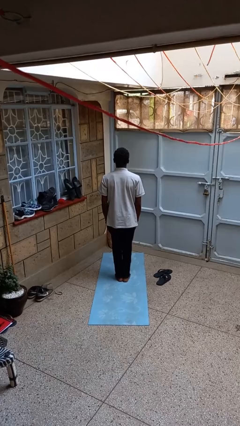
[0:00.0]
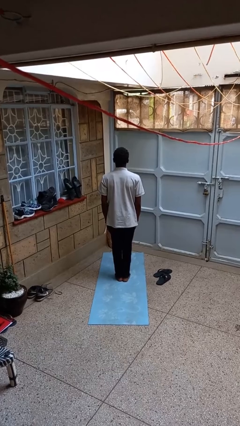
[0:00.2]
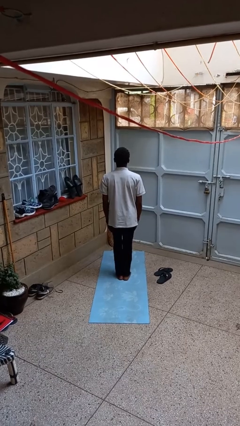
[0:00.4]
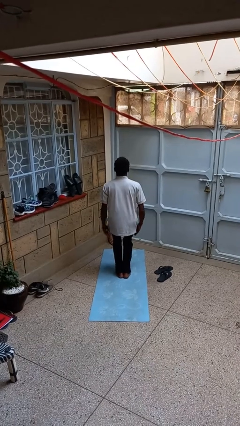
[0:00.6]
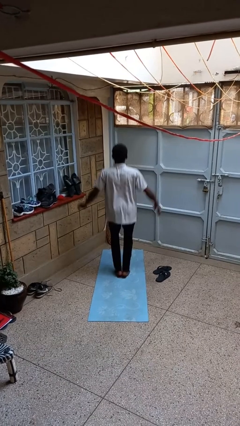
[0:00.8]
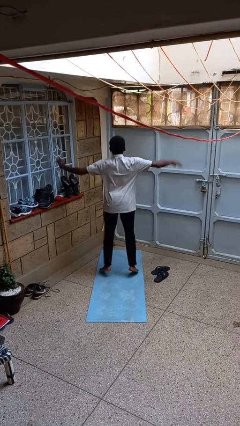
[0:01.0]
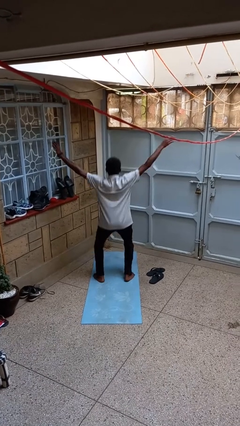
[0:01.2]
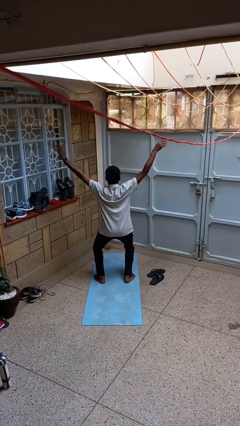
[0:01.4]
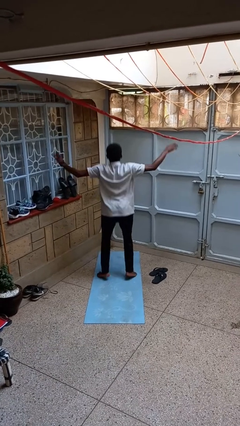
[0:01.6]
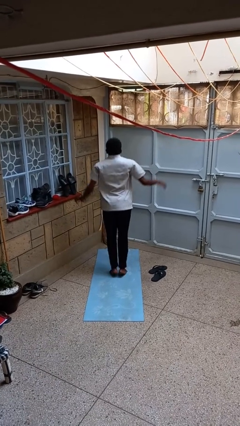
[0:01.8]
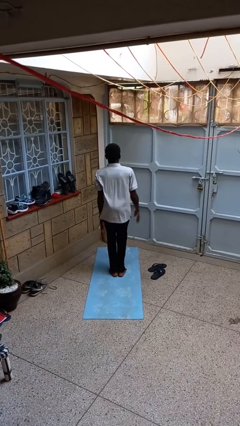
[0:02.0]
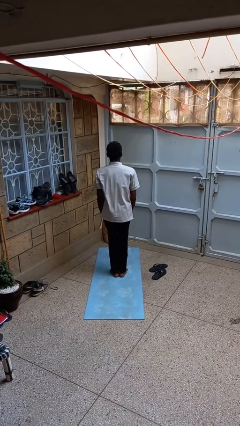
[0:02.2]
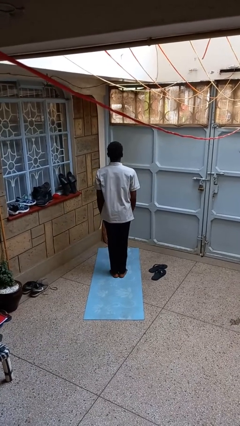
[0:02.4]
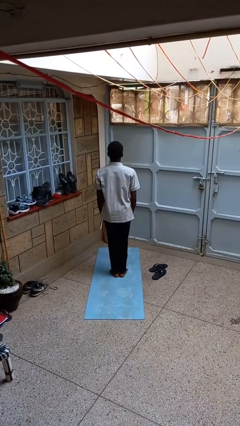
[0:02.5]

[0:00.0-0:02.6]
person exercises with jumping jacks

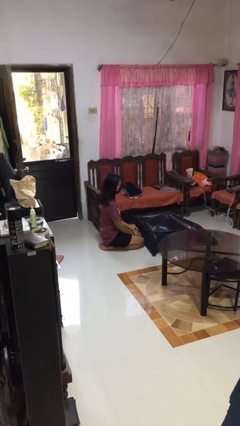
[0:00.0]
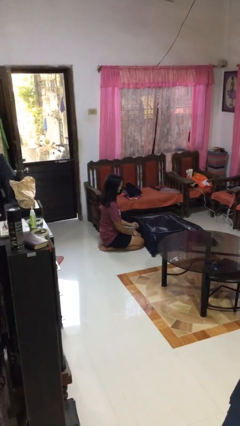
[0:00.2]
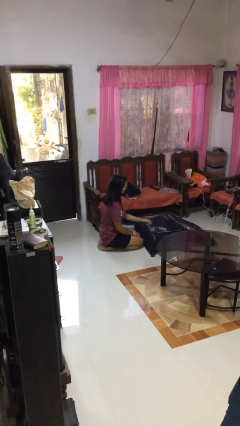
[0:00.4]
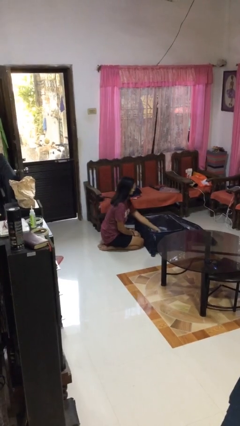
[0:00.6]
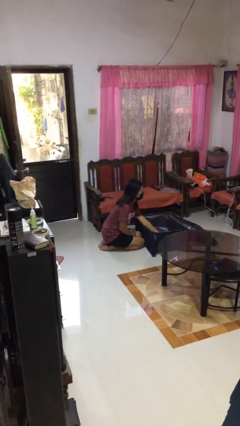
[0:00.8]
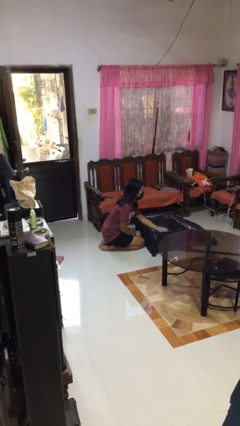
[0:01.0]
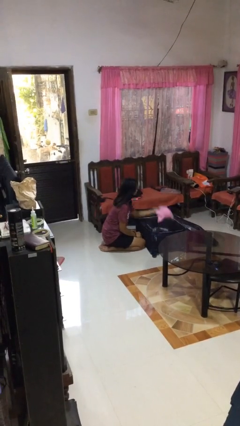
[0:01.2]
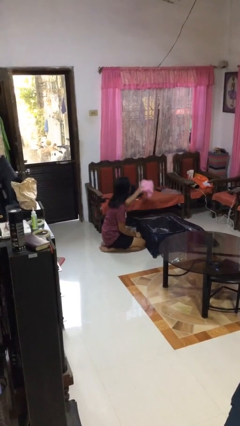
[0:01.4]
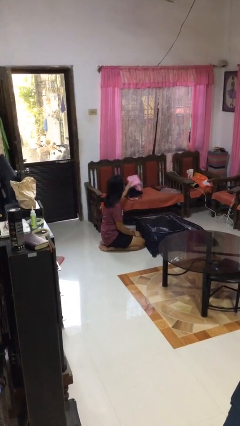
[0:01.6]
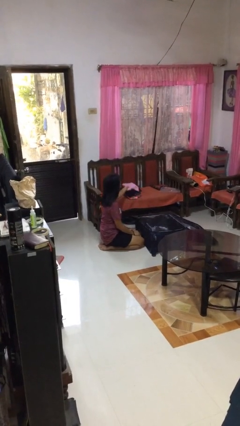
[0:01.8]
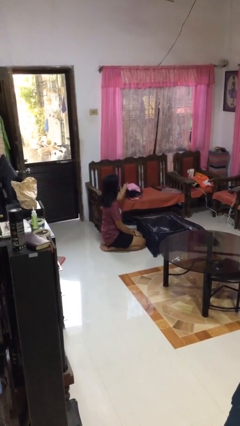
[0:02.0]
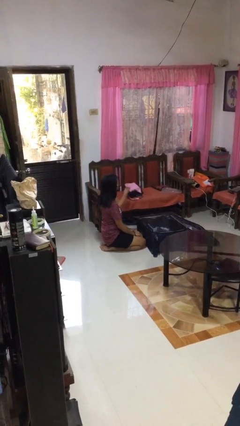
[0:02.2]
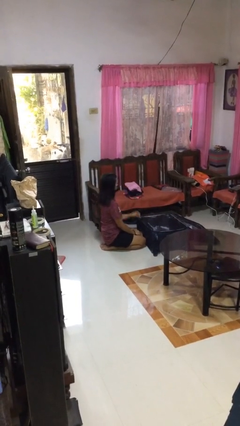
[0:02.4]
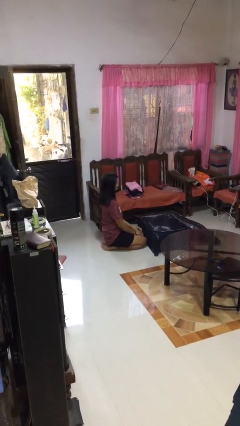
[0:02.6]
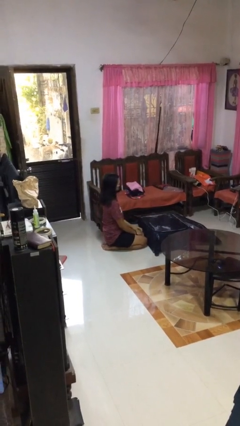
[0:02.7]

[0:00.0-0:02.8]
person unloads clothes from suitcase

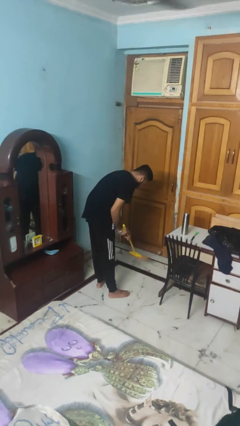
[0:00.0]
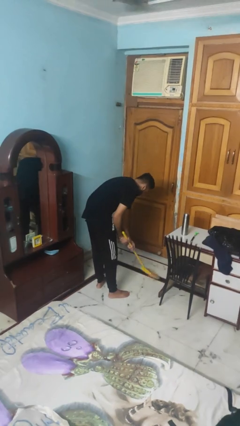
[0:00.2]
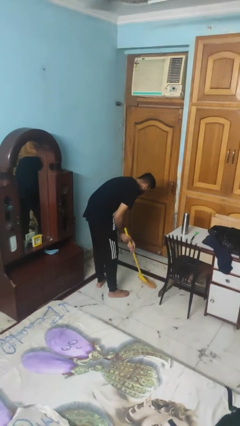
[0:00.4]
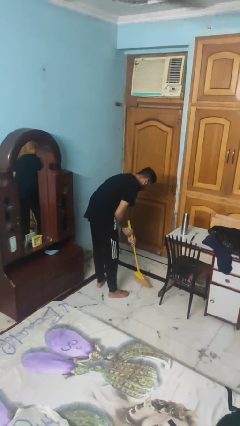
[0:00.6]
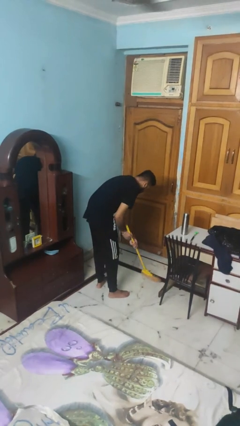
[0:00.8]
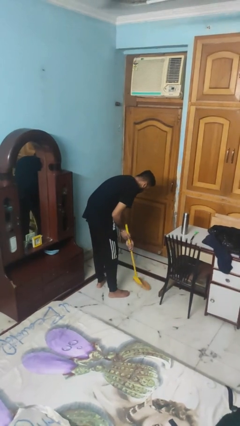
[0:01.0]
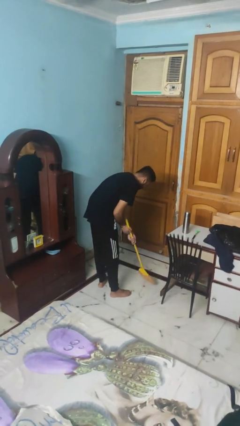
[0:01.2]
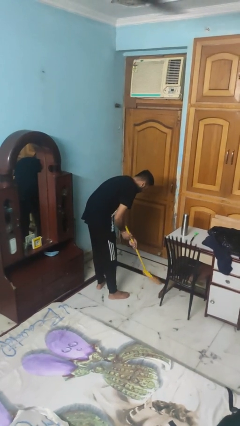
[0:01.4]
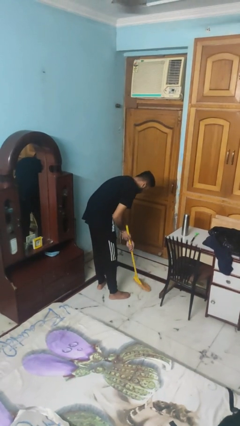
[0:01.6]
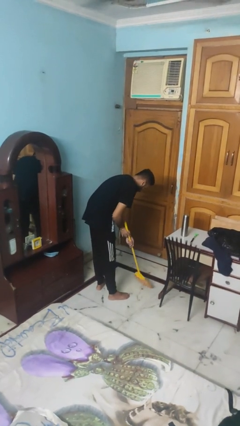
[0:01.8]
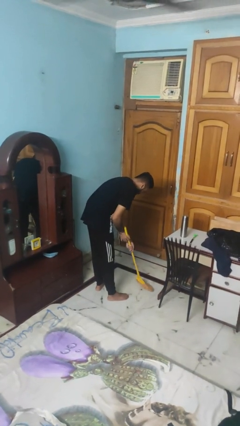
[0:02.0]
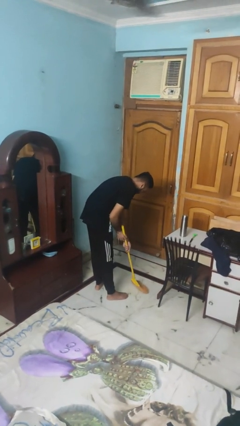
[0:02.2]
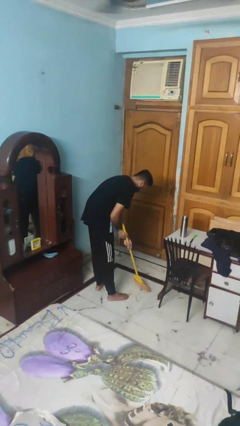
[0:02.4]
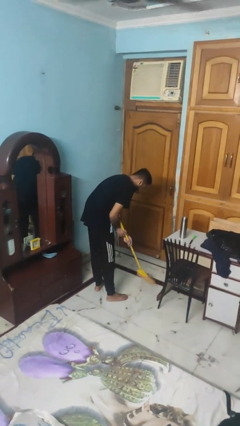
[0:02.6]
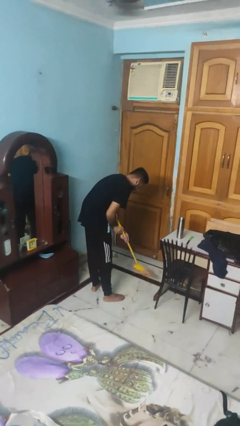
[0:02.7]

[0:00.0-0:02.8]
person sweeps floor

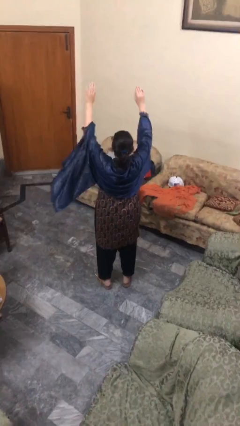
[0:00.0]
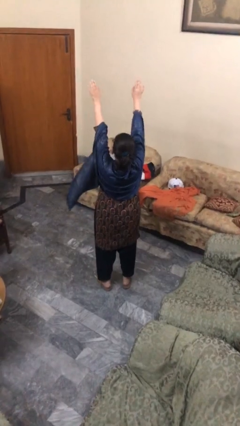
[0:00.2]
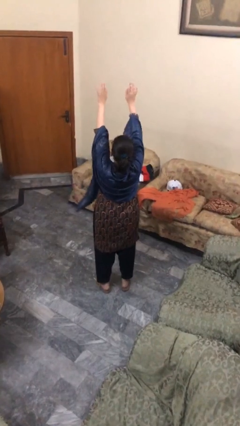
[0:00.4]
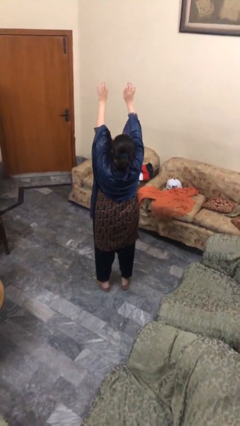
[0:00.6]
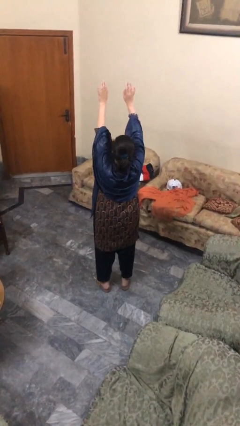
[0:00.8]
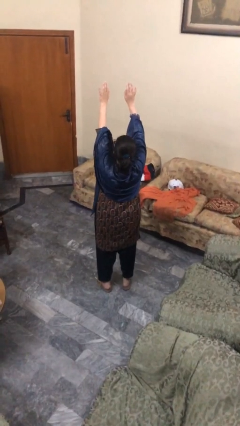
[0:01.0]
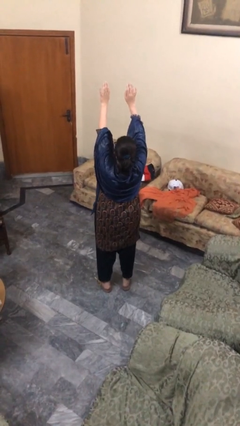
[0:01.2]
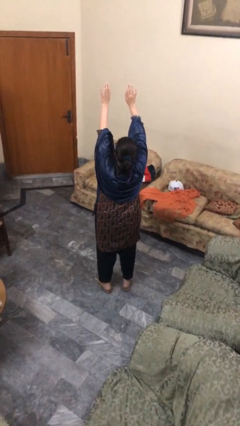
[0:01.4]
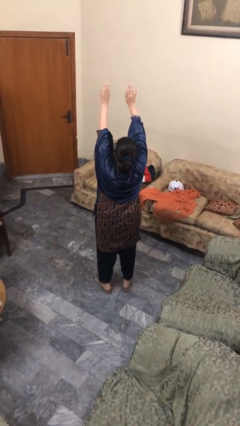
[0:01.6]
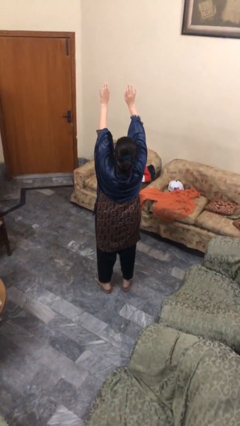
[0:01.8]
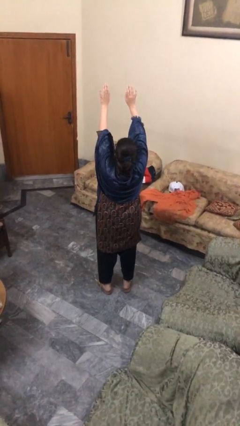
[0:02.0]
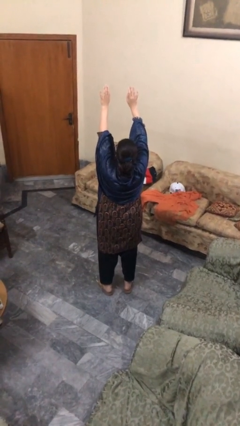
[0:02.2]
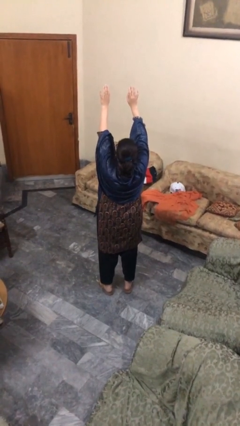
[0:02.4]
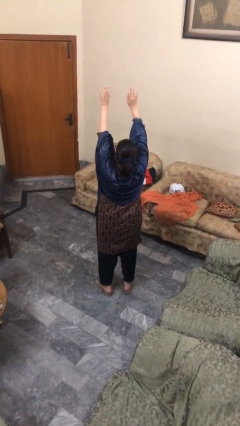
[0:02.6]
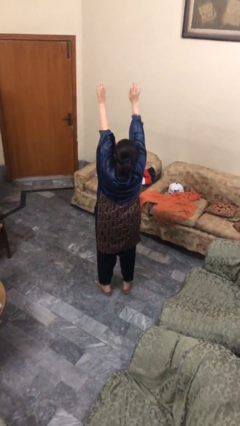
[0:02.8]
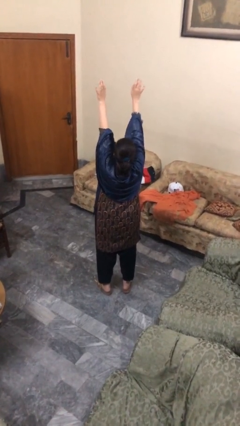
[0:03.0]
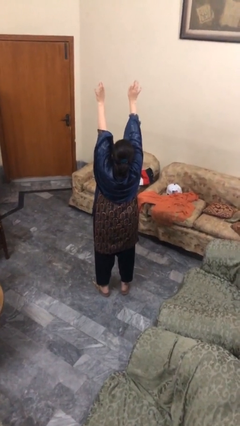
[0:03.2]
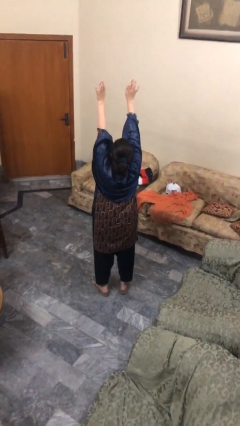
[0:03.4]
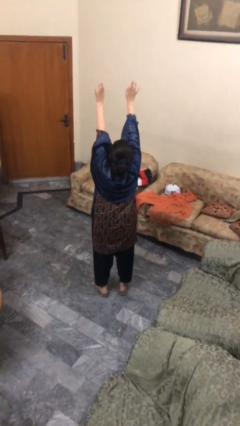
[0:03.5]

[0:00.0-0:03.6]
person stretches arms over head

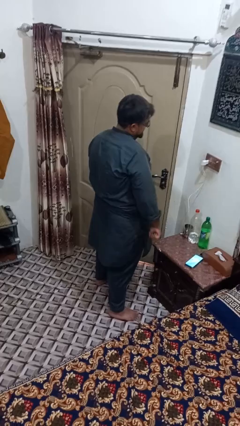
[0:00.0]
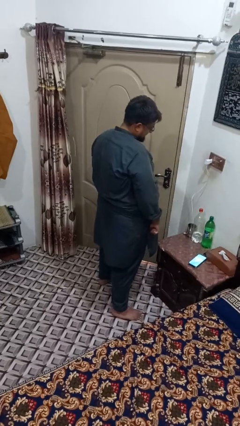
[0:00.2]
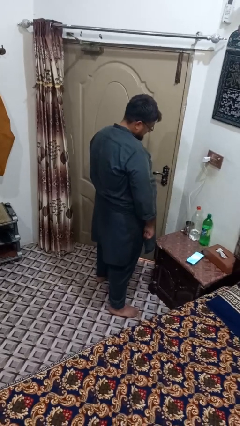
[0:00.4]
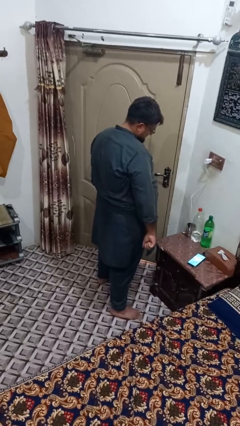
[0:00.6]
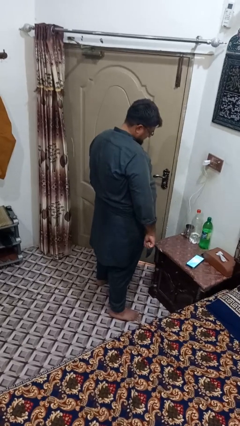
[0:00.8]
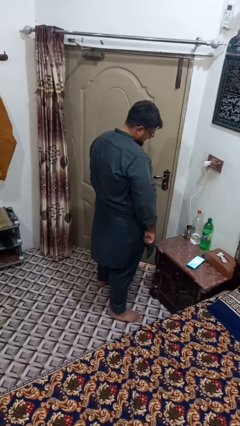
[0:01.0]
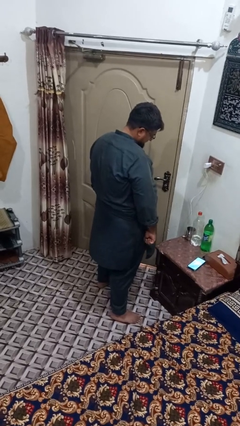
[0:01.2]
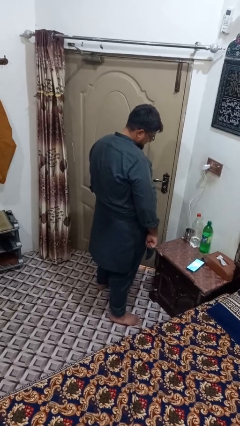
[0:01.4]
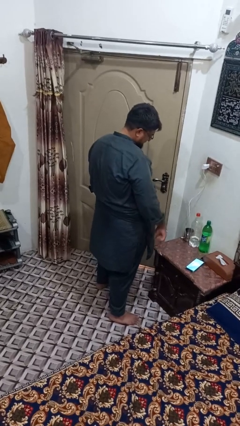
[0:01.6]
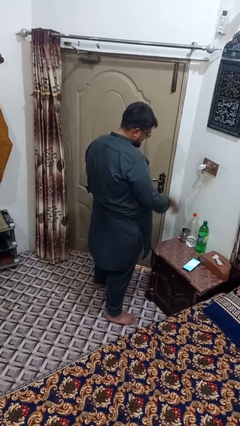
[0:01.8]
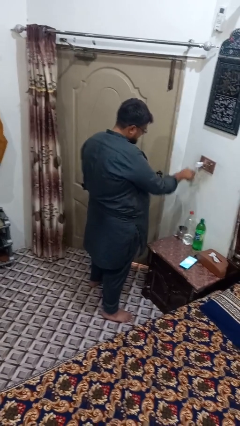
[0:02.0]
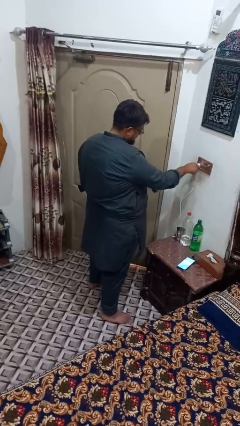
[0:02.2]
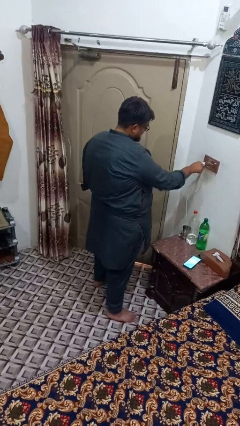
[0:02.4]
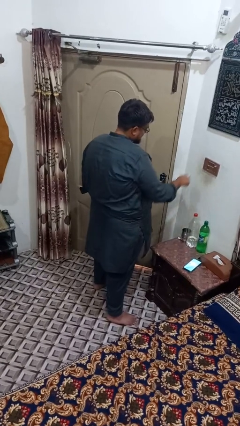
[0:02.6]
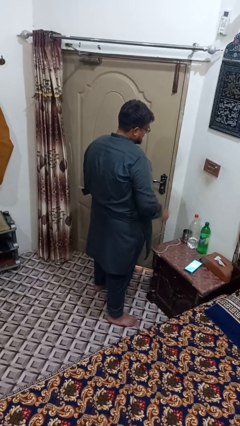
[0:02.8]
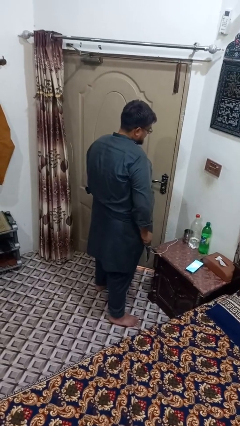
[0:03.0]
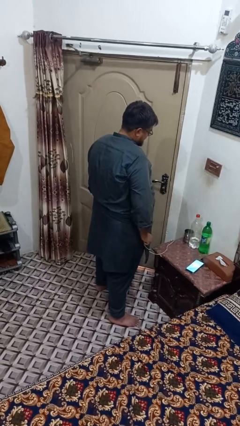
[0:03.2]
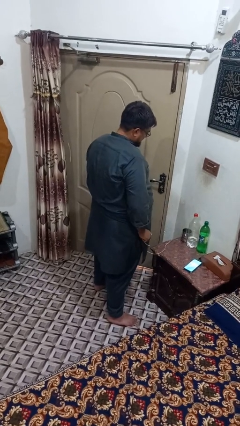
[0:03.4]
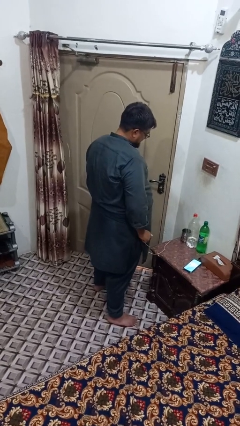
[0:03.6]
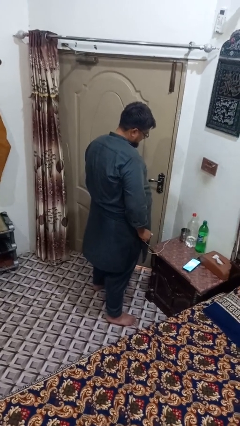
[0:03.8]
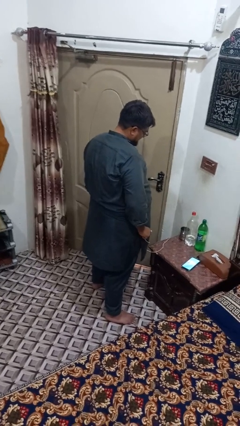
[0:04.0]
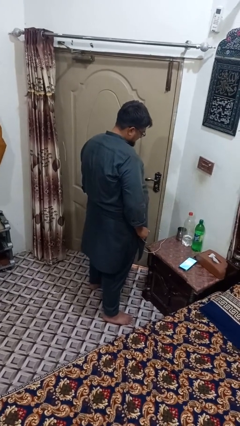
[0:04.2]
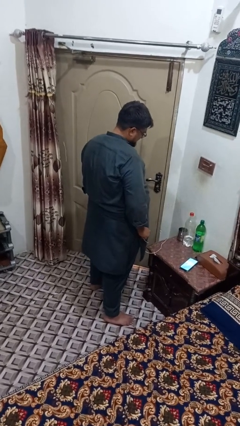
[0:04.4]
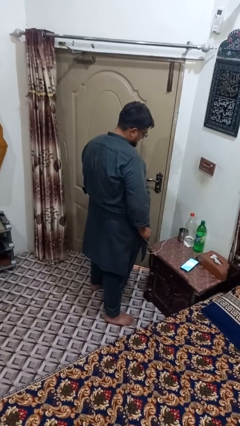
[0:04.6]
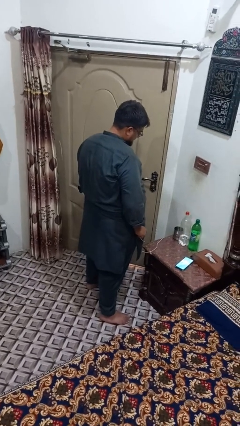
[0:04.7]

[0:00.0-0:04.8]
person unplugs from electrical socket

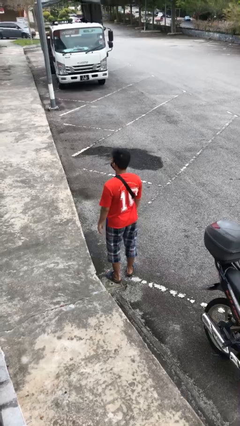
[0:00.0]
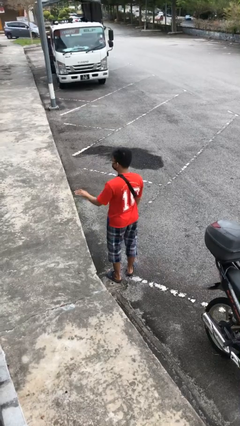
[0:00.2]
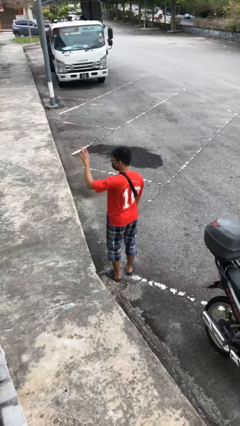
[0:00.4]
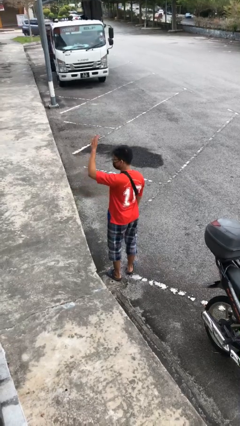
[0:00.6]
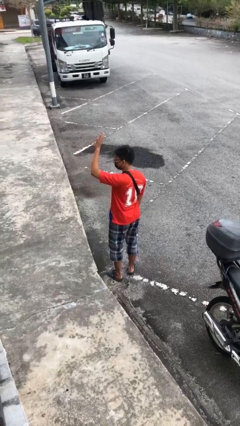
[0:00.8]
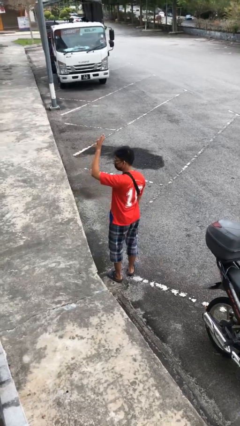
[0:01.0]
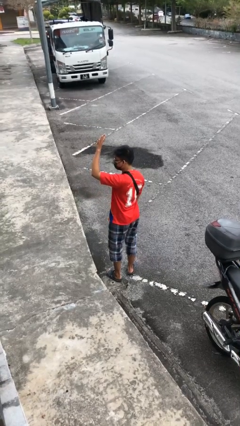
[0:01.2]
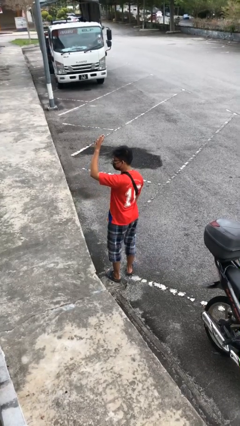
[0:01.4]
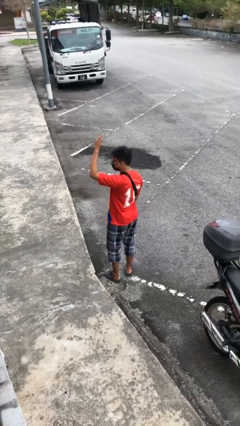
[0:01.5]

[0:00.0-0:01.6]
person gestures raise hand
